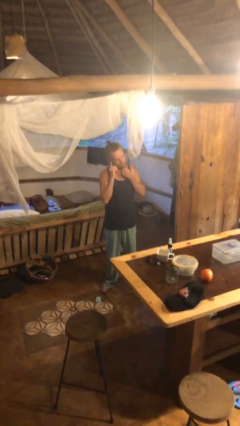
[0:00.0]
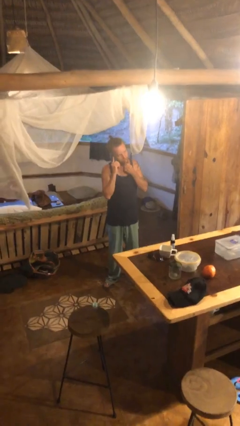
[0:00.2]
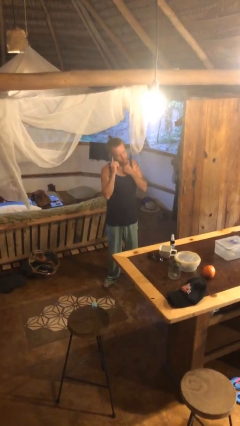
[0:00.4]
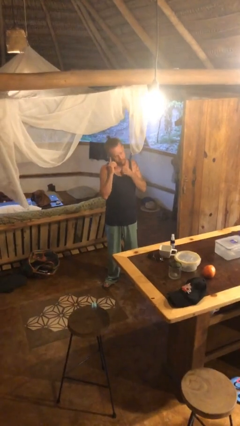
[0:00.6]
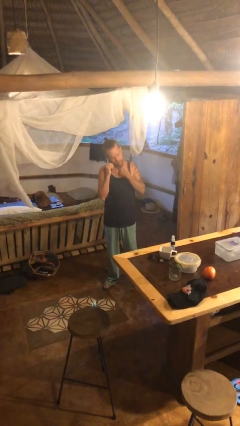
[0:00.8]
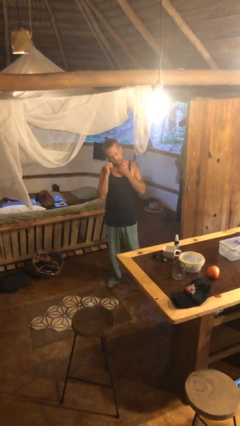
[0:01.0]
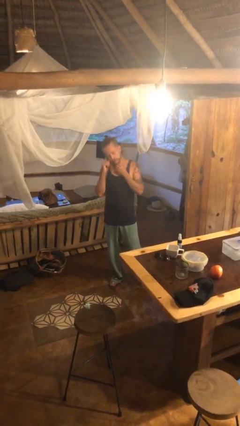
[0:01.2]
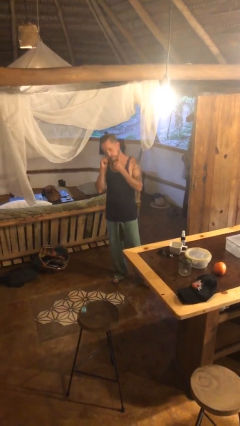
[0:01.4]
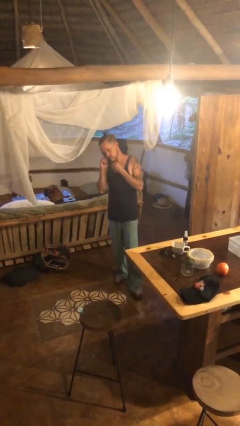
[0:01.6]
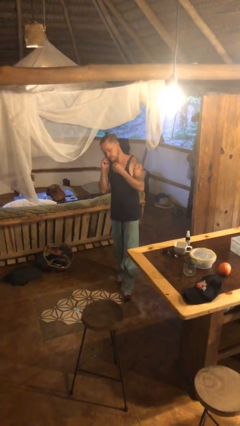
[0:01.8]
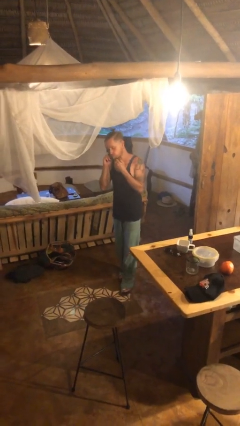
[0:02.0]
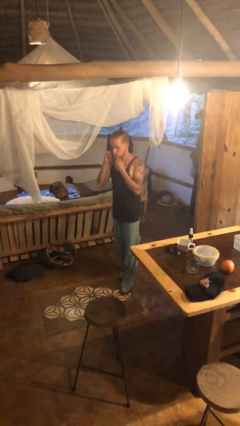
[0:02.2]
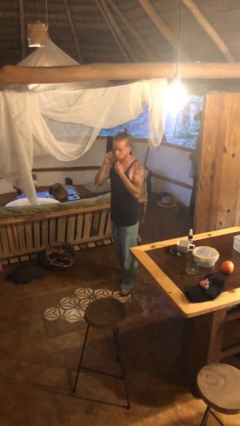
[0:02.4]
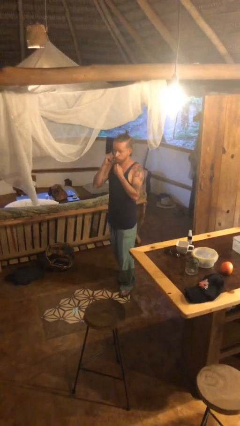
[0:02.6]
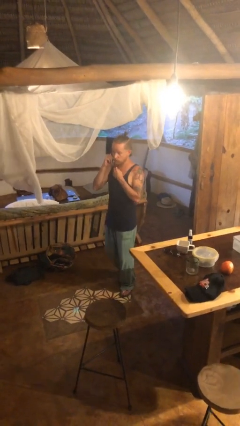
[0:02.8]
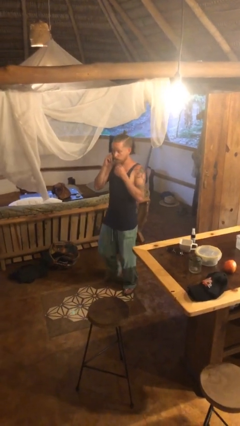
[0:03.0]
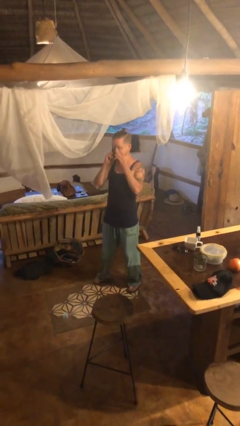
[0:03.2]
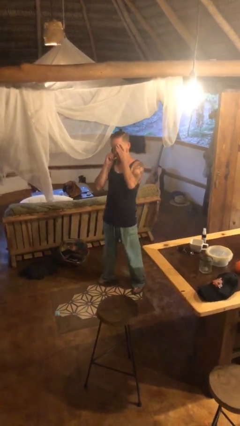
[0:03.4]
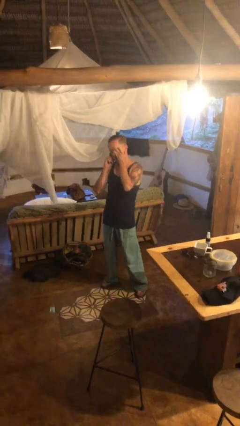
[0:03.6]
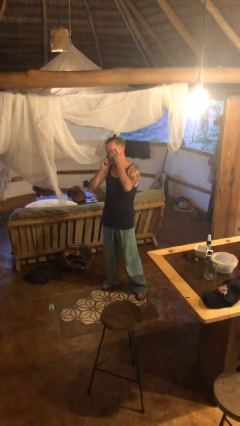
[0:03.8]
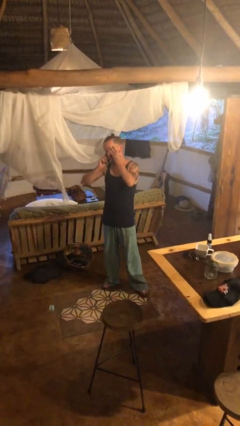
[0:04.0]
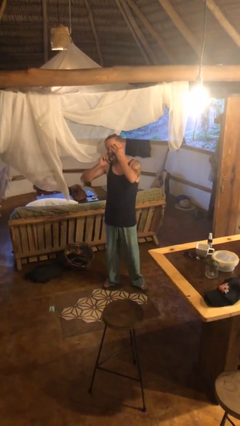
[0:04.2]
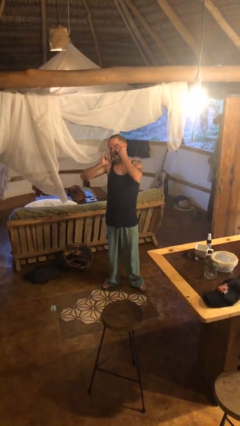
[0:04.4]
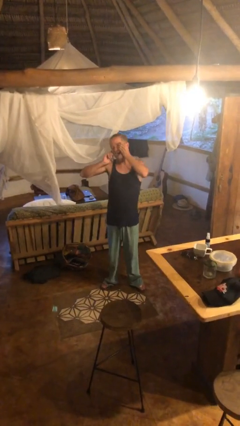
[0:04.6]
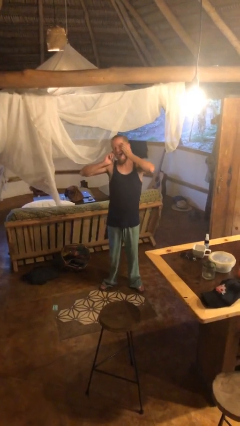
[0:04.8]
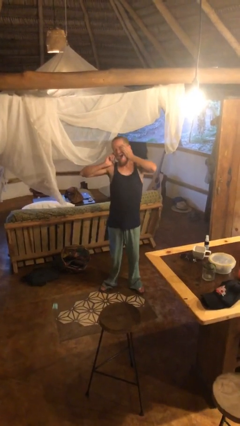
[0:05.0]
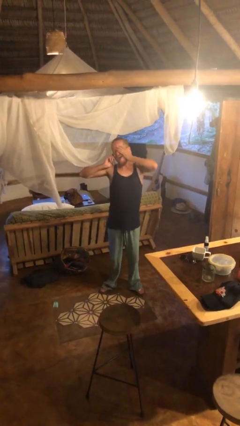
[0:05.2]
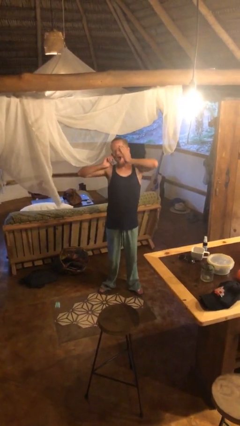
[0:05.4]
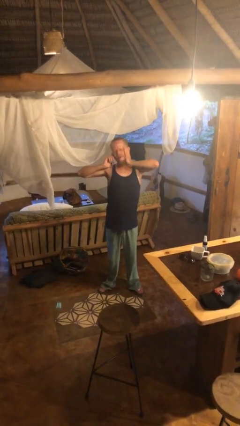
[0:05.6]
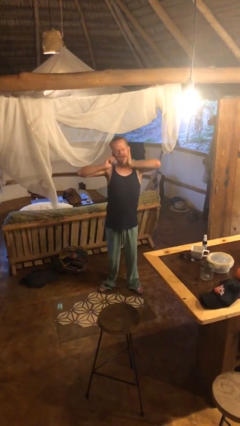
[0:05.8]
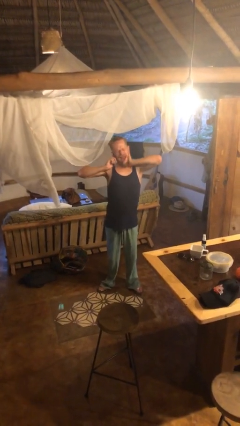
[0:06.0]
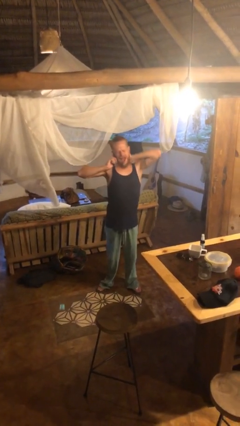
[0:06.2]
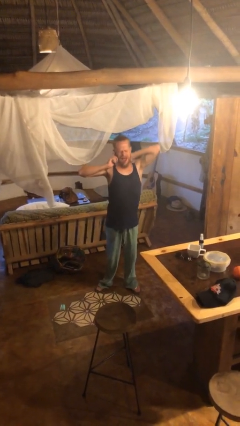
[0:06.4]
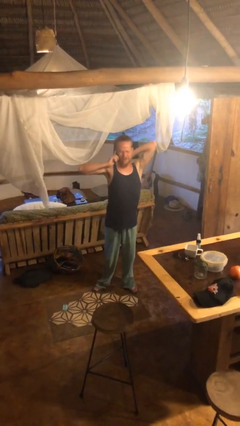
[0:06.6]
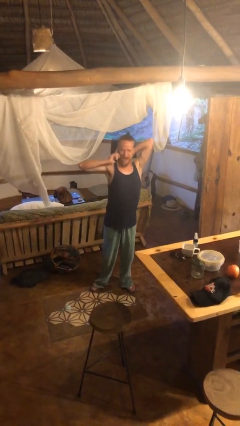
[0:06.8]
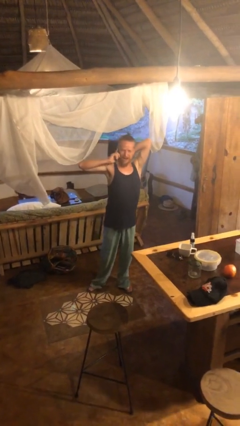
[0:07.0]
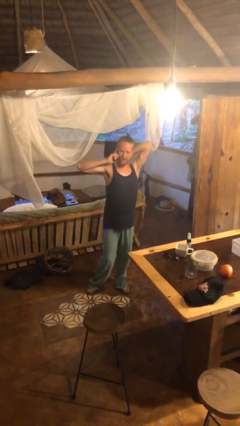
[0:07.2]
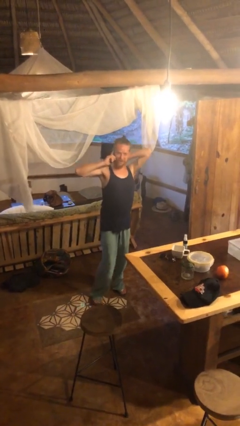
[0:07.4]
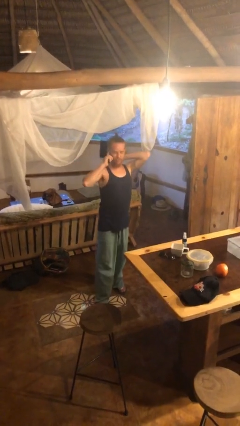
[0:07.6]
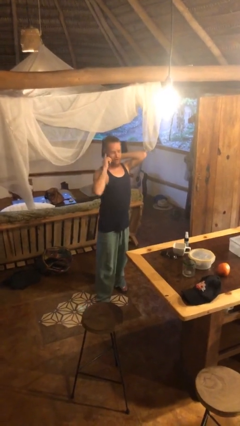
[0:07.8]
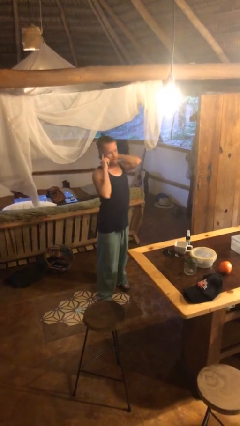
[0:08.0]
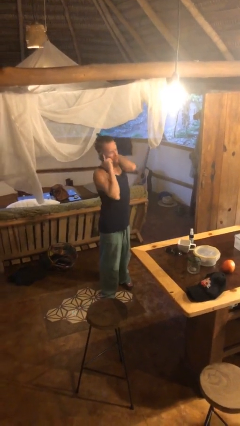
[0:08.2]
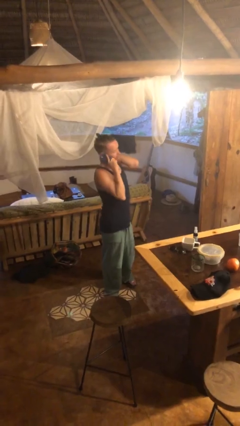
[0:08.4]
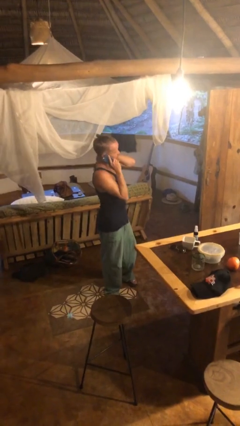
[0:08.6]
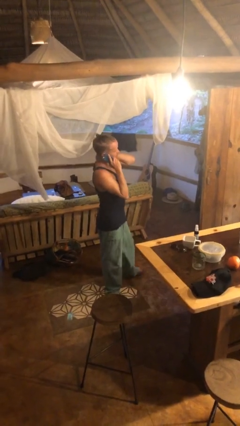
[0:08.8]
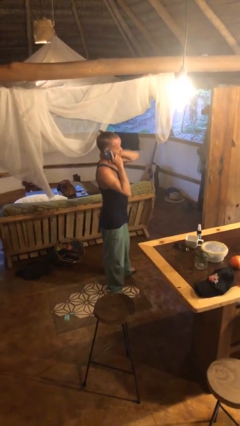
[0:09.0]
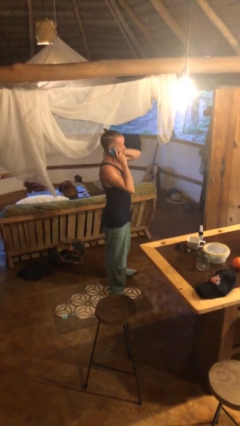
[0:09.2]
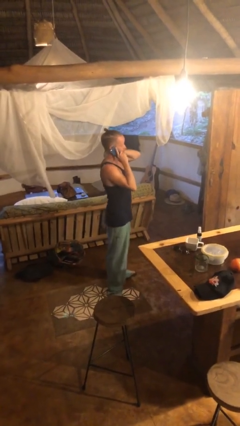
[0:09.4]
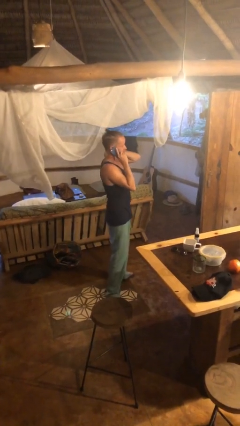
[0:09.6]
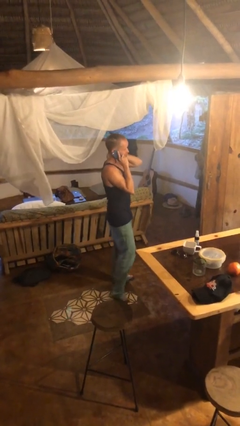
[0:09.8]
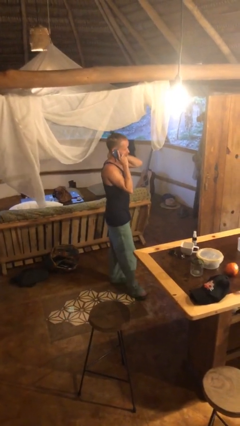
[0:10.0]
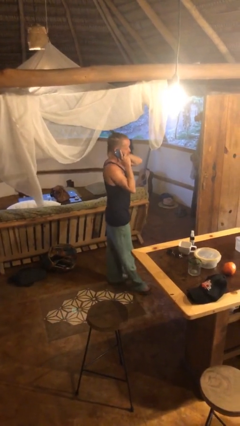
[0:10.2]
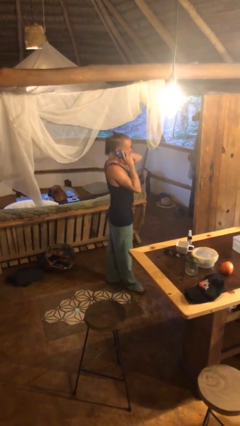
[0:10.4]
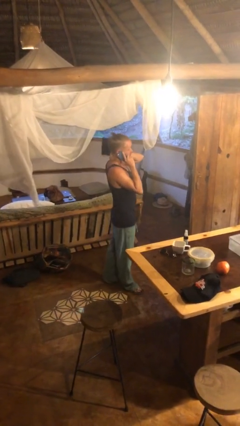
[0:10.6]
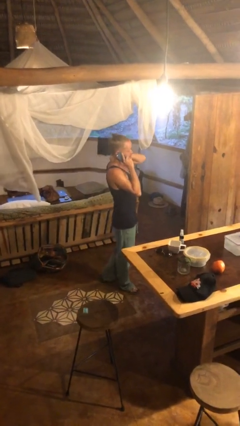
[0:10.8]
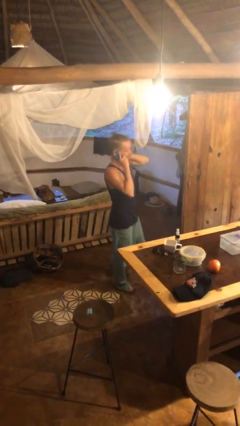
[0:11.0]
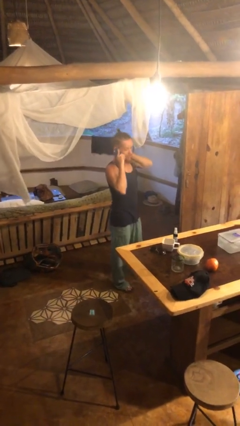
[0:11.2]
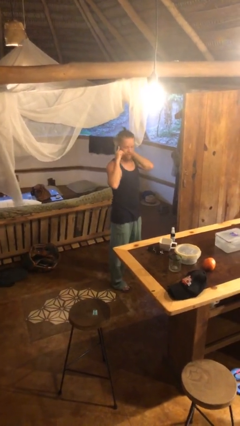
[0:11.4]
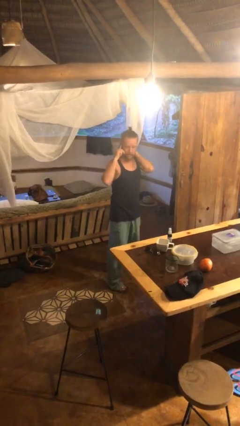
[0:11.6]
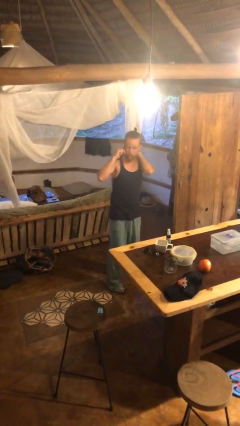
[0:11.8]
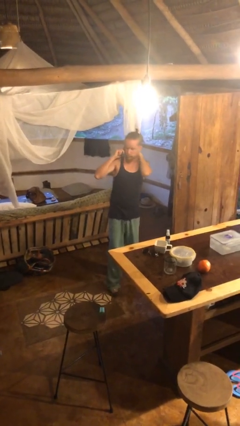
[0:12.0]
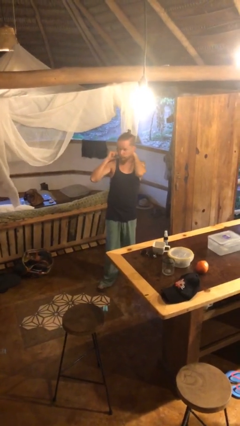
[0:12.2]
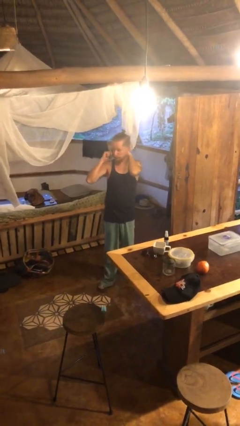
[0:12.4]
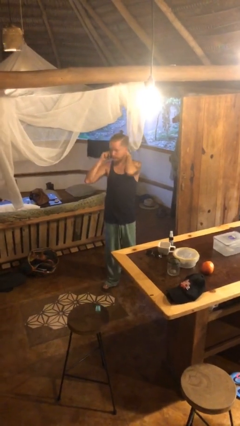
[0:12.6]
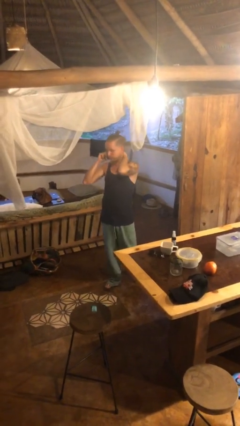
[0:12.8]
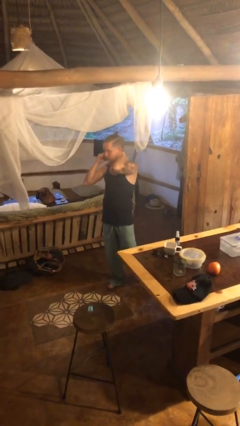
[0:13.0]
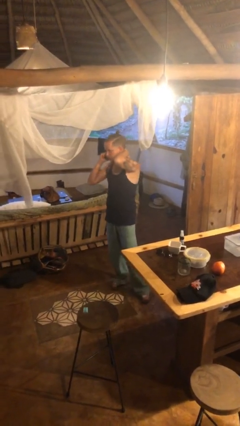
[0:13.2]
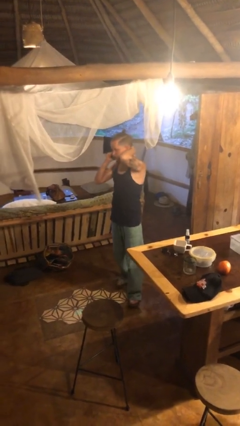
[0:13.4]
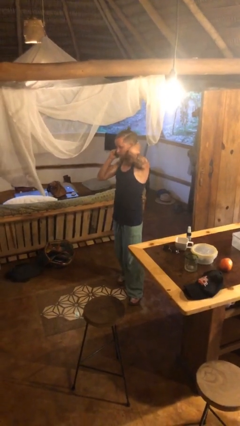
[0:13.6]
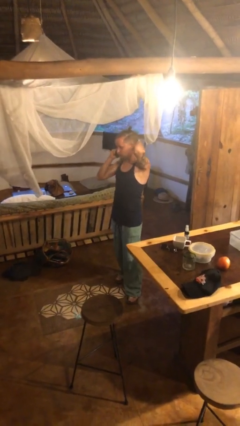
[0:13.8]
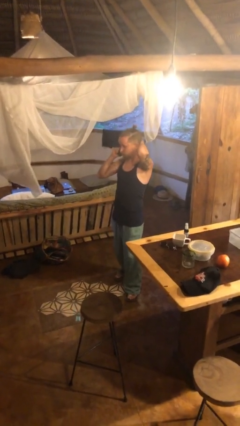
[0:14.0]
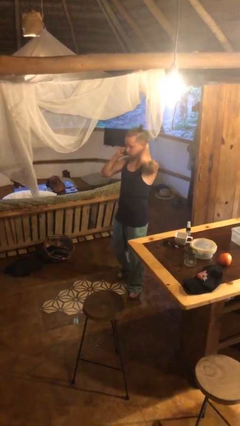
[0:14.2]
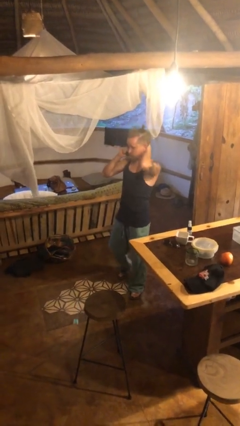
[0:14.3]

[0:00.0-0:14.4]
person talks on phone

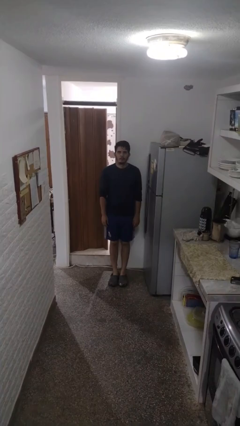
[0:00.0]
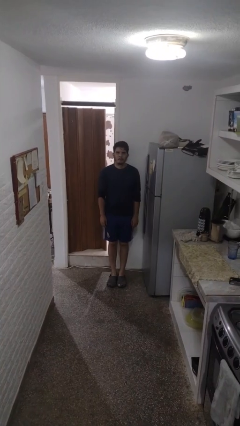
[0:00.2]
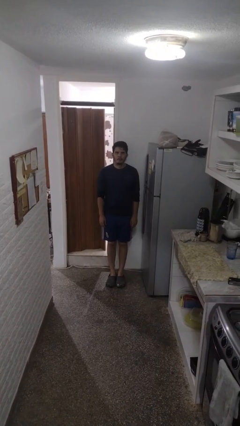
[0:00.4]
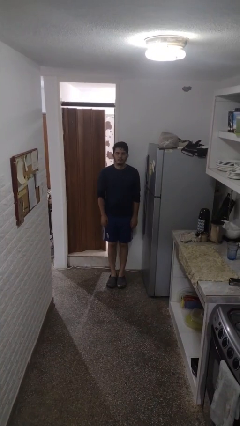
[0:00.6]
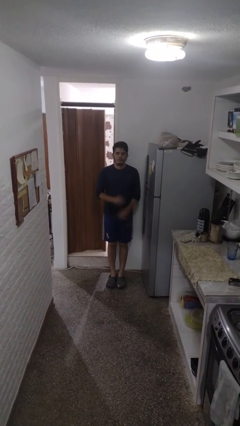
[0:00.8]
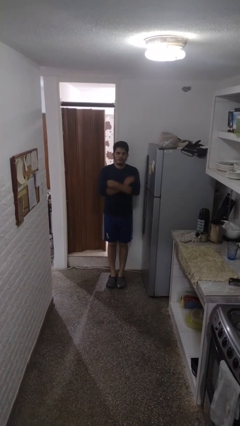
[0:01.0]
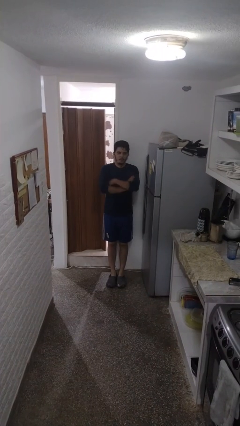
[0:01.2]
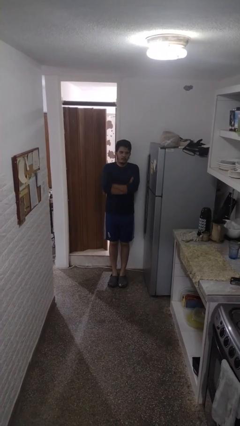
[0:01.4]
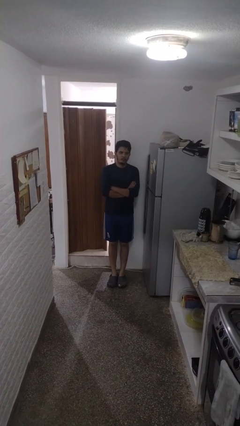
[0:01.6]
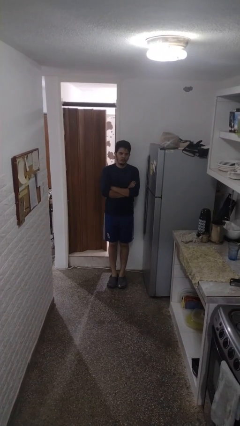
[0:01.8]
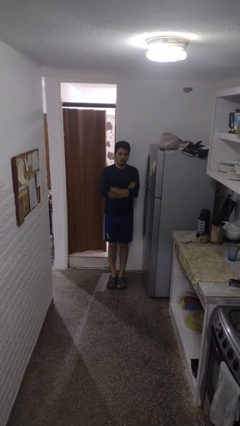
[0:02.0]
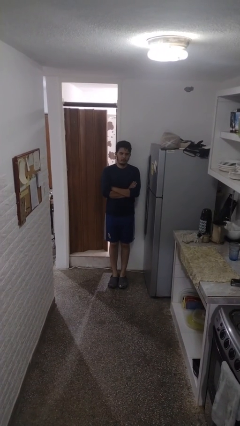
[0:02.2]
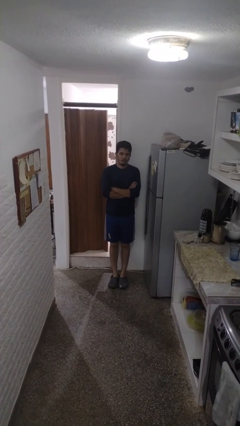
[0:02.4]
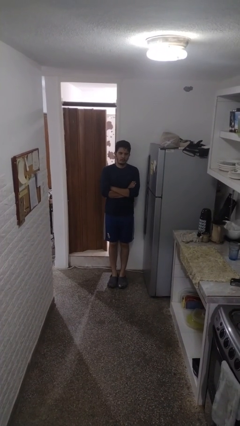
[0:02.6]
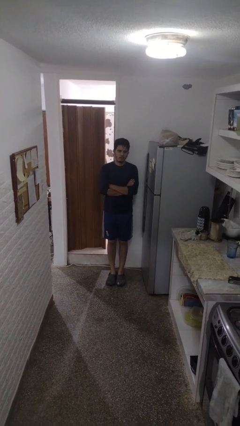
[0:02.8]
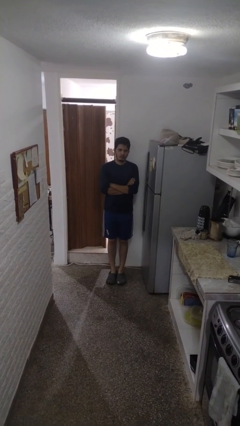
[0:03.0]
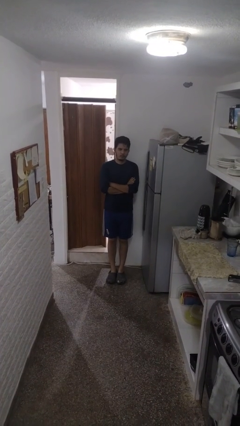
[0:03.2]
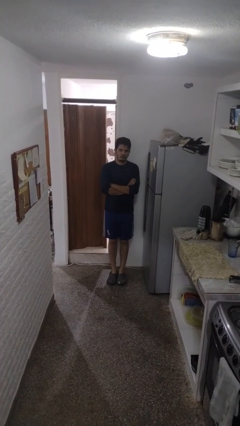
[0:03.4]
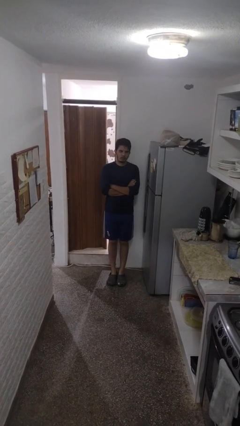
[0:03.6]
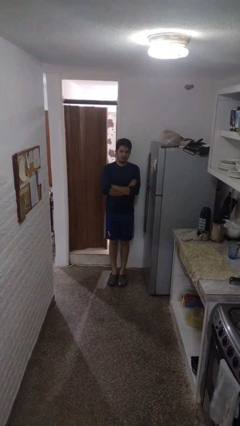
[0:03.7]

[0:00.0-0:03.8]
person crosses arms
